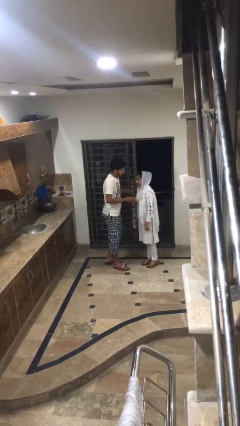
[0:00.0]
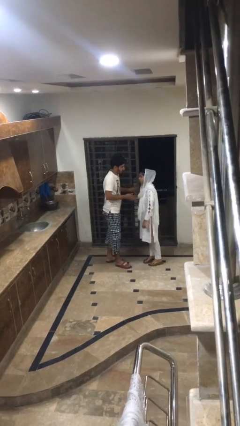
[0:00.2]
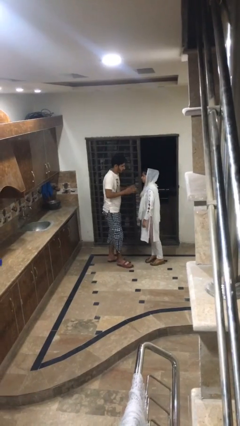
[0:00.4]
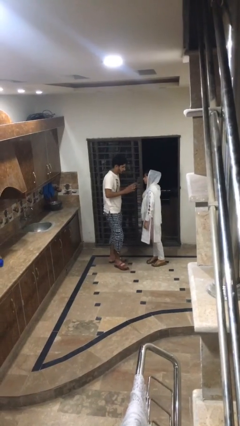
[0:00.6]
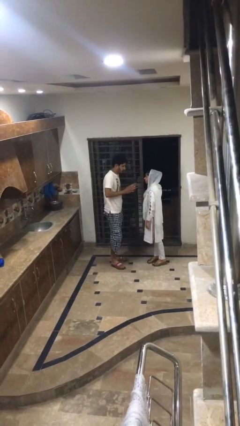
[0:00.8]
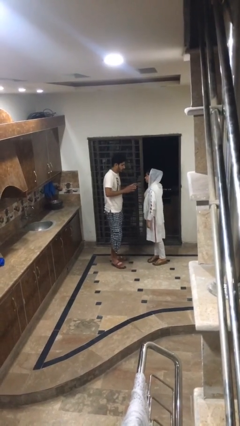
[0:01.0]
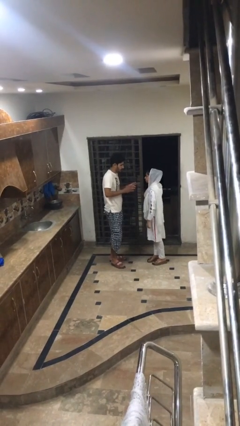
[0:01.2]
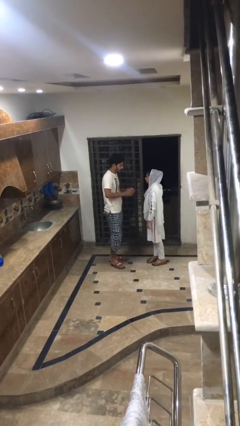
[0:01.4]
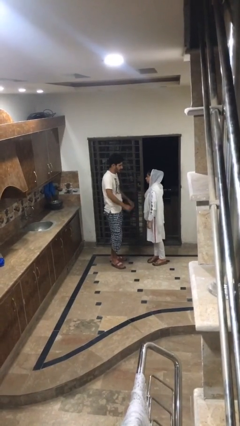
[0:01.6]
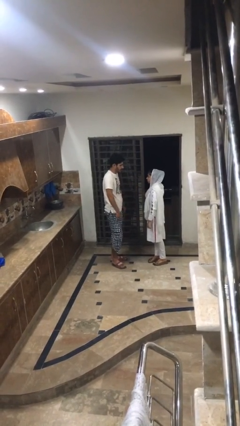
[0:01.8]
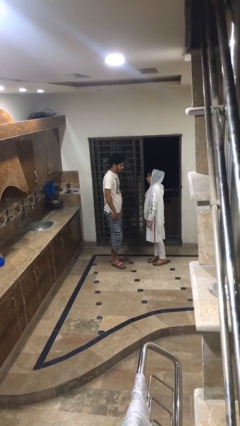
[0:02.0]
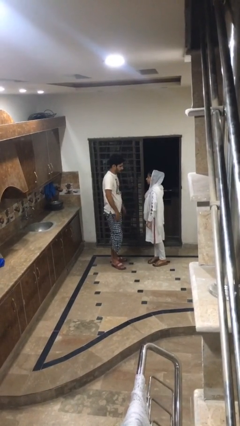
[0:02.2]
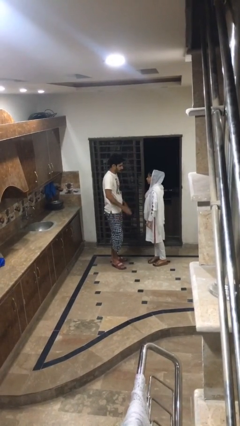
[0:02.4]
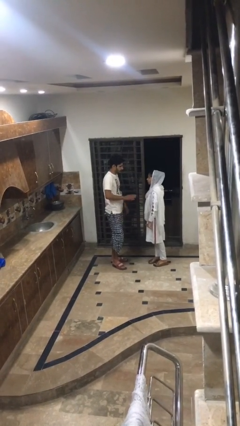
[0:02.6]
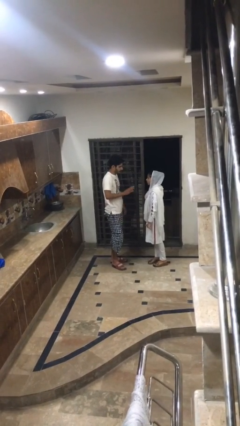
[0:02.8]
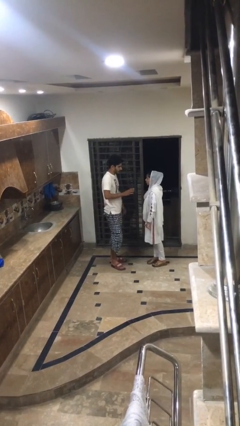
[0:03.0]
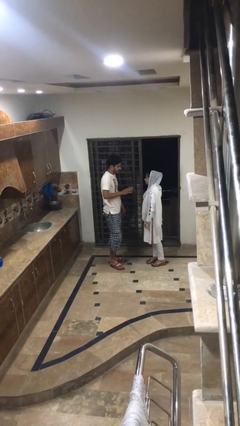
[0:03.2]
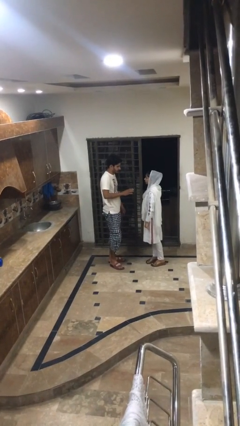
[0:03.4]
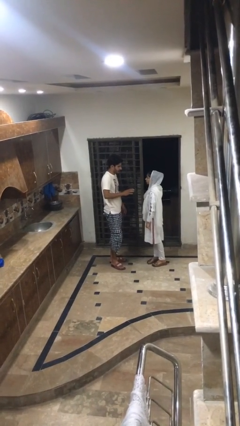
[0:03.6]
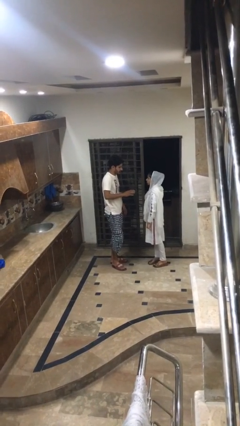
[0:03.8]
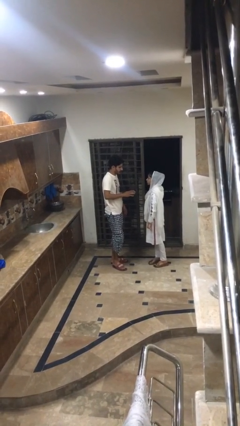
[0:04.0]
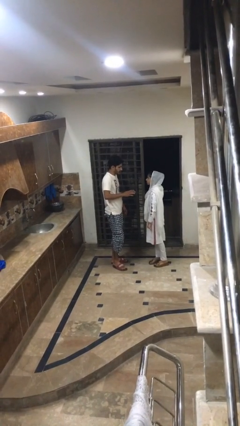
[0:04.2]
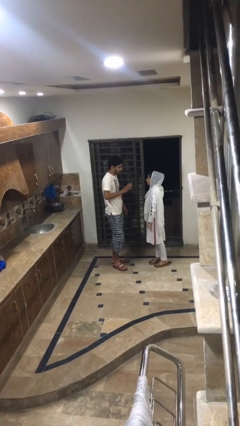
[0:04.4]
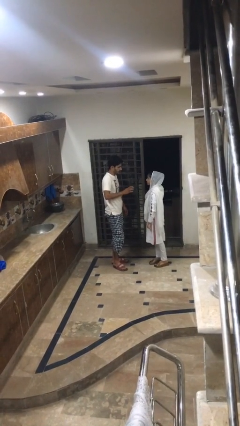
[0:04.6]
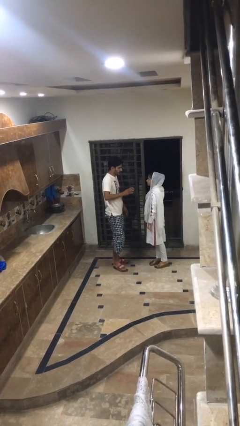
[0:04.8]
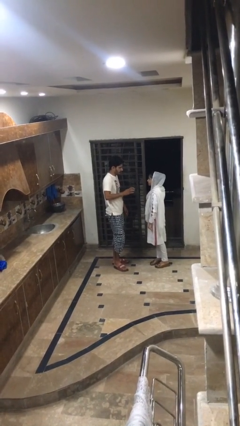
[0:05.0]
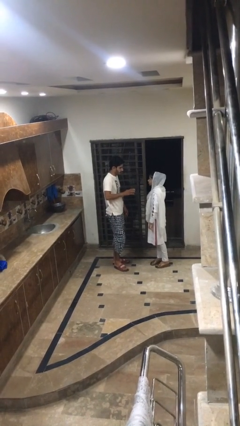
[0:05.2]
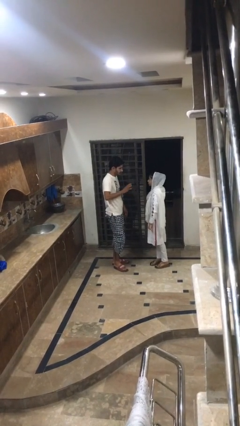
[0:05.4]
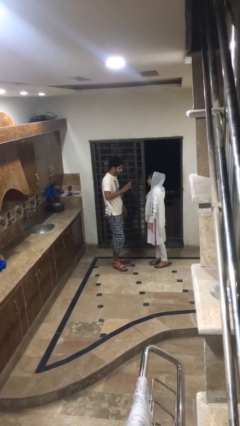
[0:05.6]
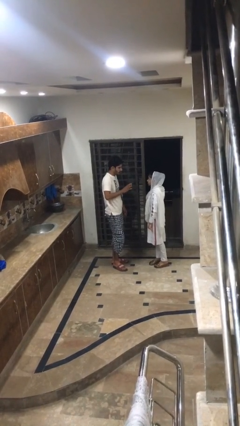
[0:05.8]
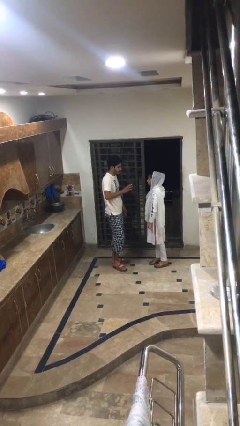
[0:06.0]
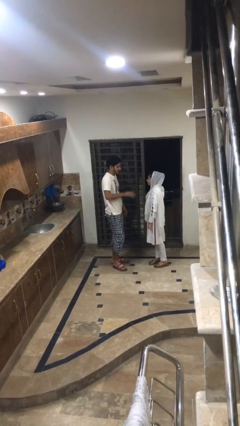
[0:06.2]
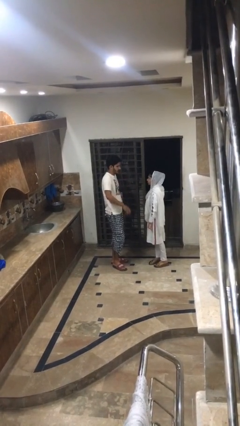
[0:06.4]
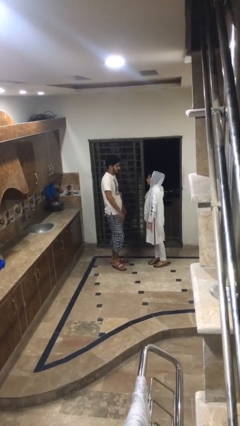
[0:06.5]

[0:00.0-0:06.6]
person talks to person

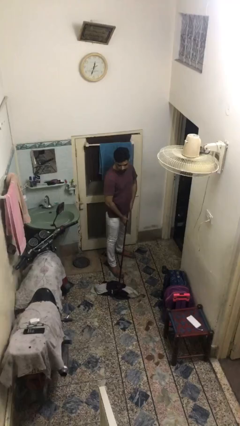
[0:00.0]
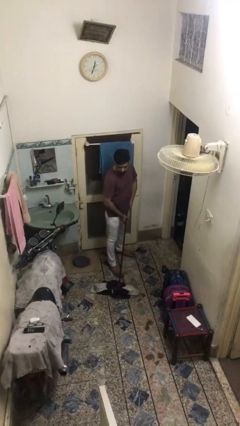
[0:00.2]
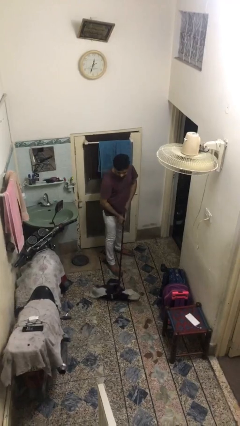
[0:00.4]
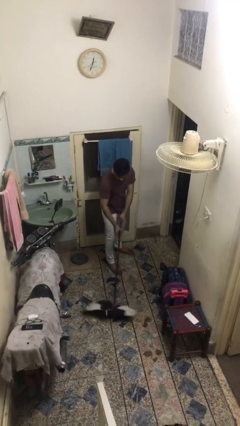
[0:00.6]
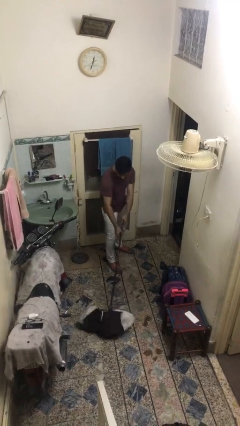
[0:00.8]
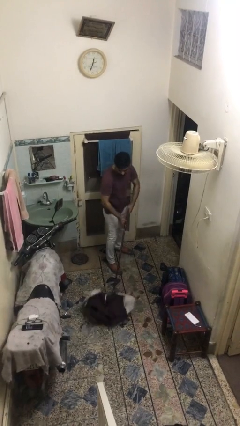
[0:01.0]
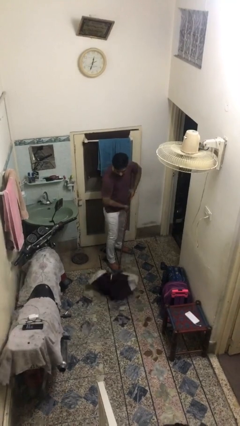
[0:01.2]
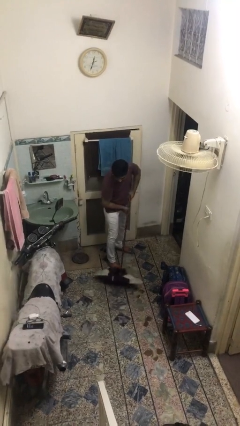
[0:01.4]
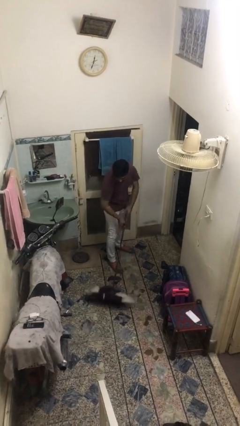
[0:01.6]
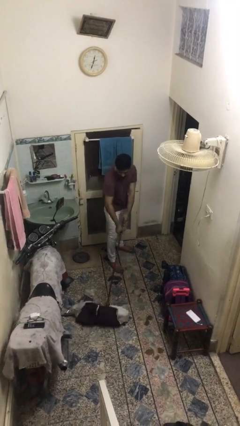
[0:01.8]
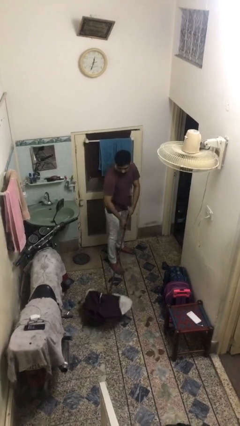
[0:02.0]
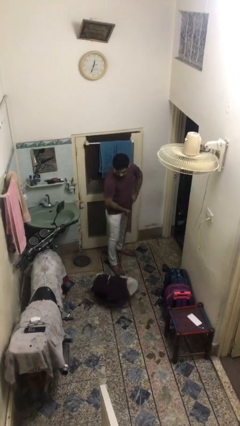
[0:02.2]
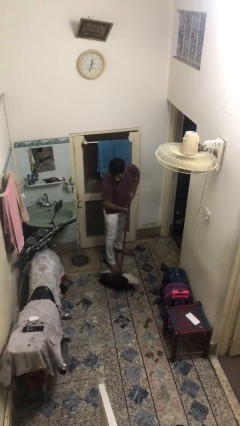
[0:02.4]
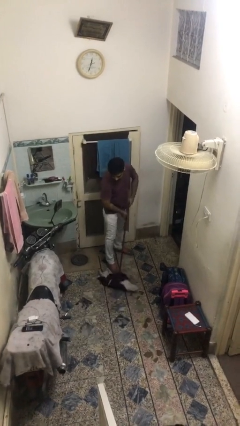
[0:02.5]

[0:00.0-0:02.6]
person sweeps floor

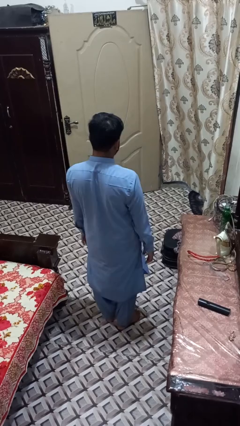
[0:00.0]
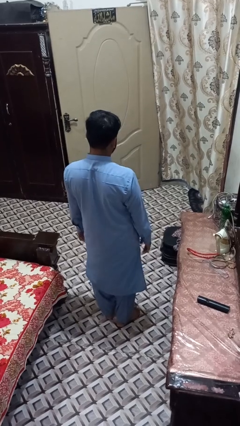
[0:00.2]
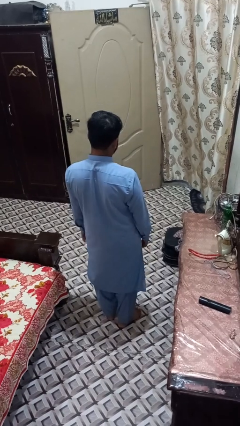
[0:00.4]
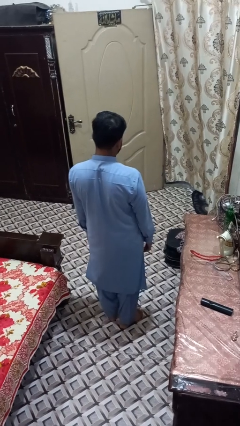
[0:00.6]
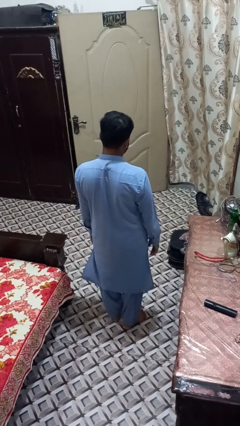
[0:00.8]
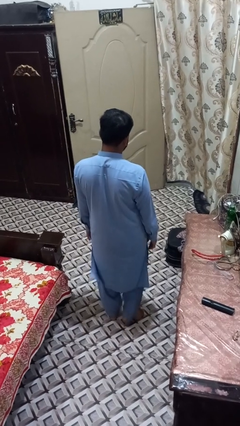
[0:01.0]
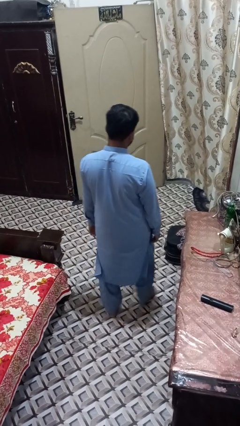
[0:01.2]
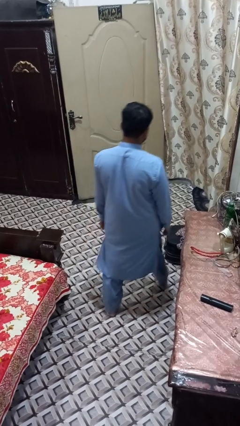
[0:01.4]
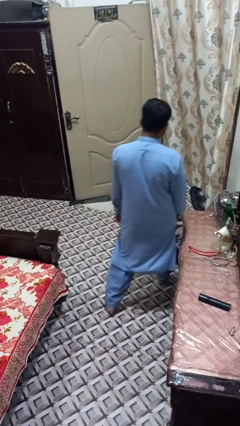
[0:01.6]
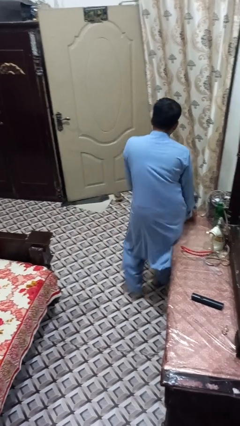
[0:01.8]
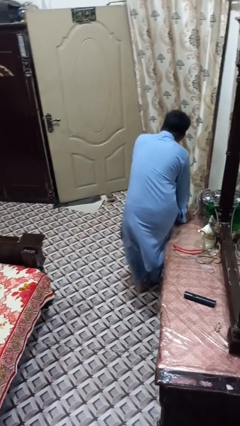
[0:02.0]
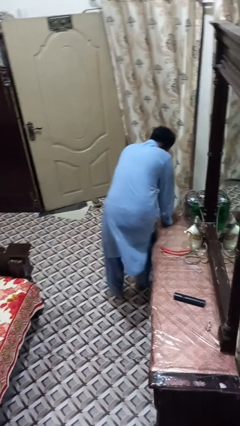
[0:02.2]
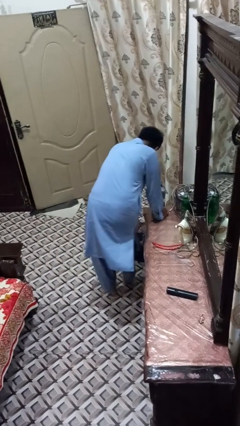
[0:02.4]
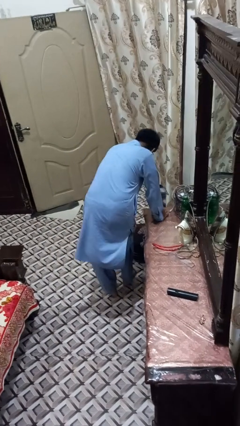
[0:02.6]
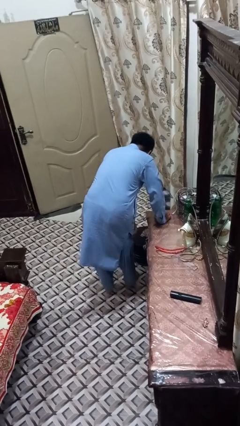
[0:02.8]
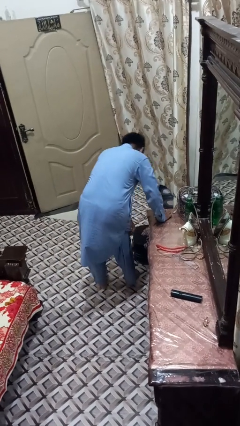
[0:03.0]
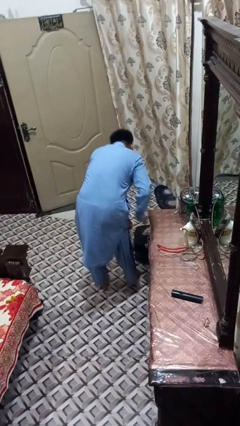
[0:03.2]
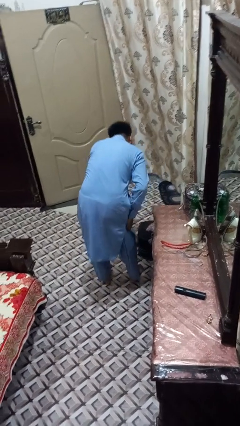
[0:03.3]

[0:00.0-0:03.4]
person bumps into table

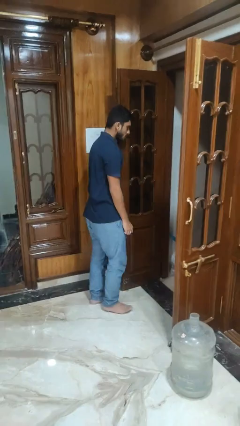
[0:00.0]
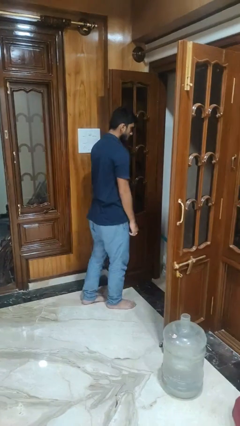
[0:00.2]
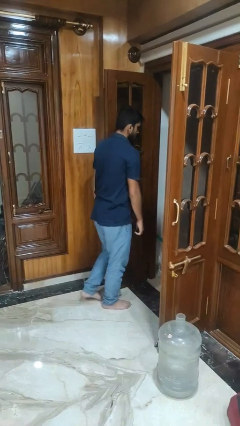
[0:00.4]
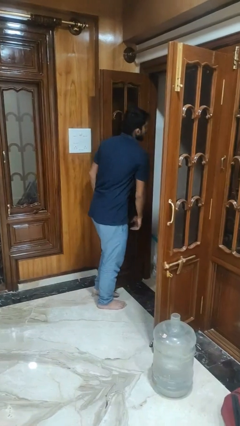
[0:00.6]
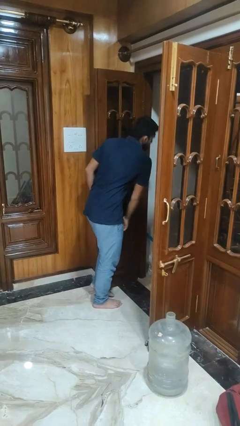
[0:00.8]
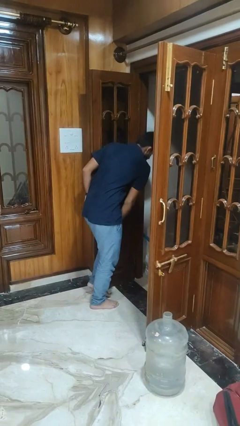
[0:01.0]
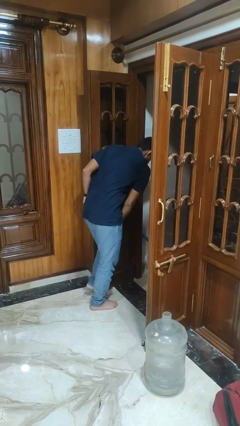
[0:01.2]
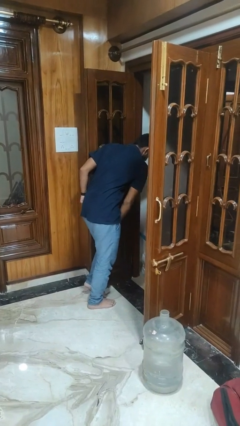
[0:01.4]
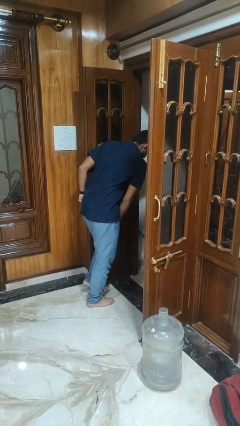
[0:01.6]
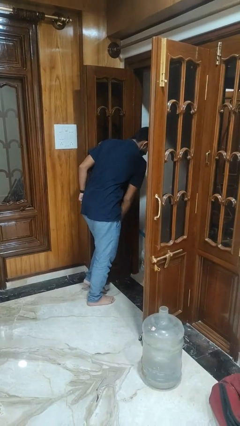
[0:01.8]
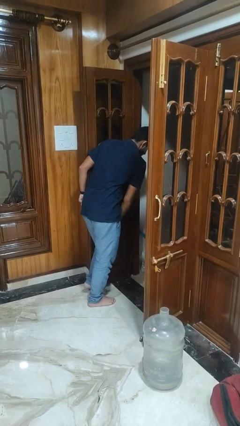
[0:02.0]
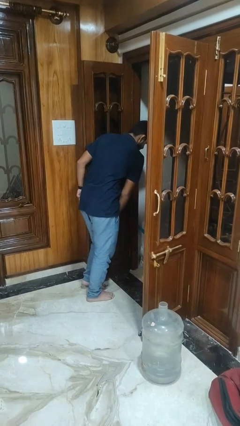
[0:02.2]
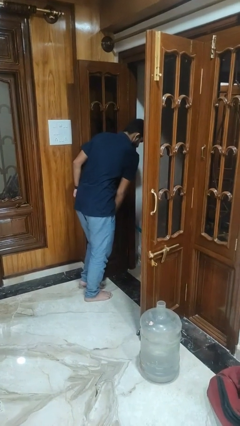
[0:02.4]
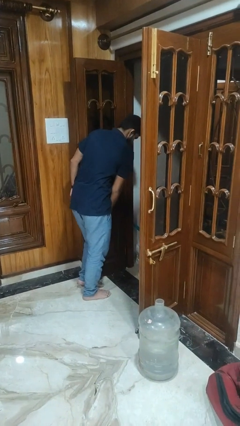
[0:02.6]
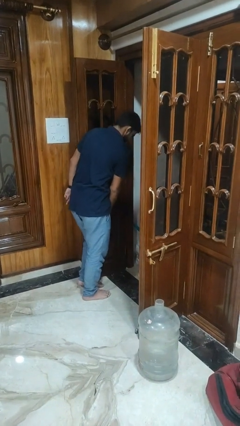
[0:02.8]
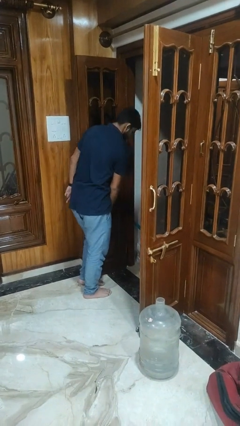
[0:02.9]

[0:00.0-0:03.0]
person bumps into wall

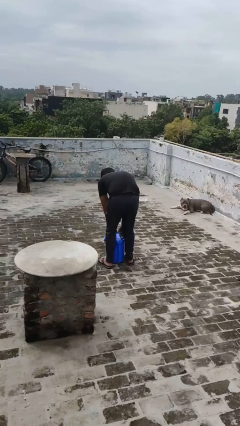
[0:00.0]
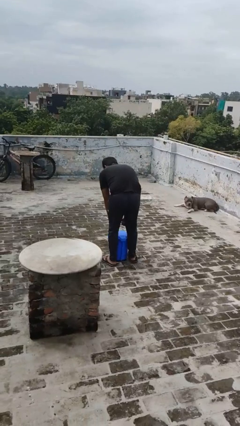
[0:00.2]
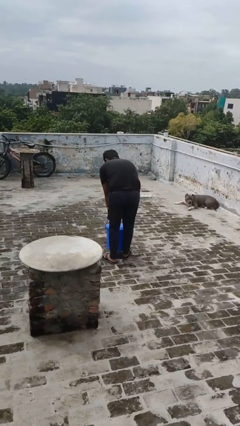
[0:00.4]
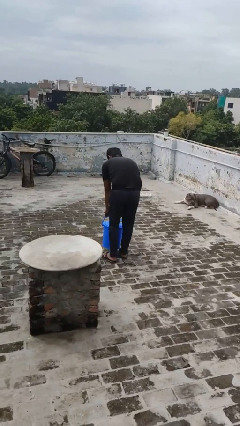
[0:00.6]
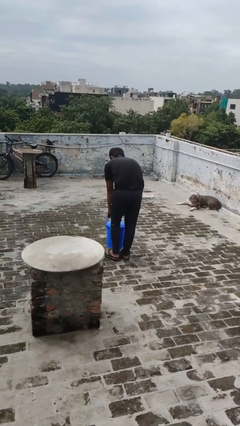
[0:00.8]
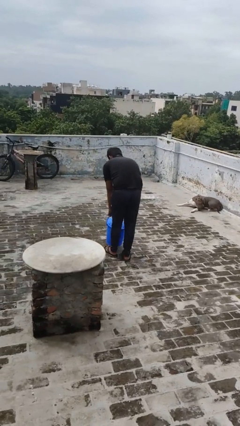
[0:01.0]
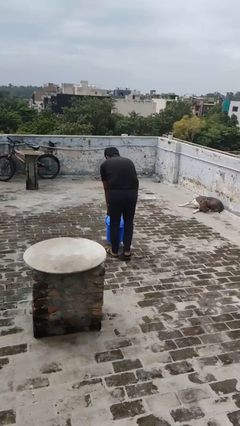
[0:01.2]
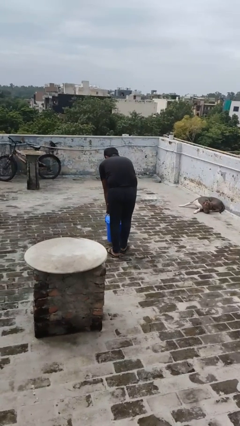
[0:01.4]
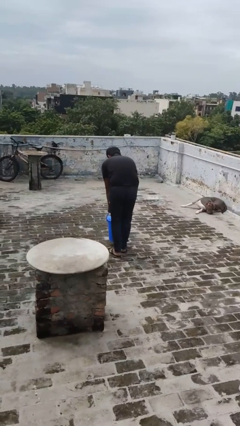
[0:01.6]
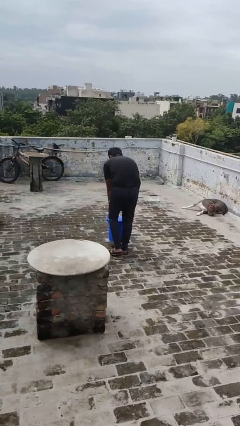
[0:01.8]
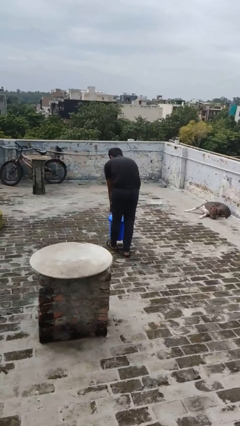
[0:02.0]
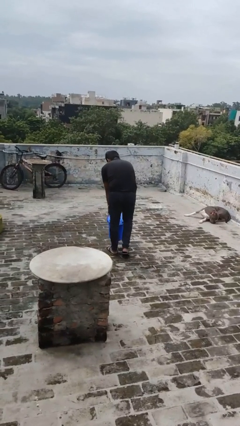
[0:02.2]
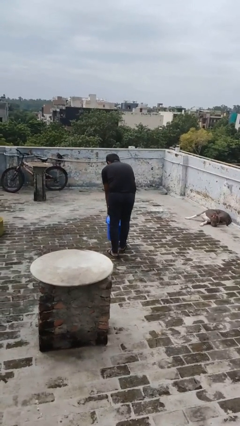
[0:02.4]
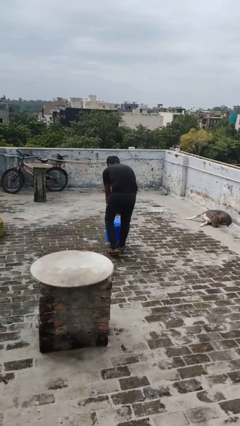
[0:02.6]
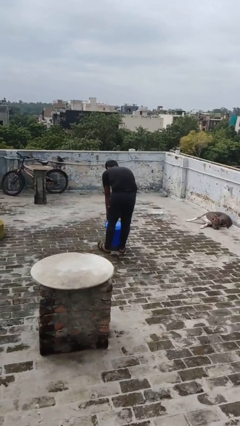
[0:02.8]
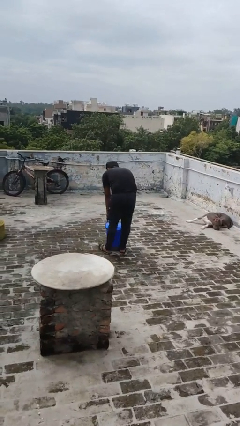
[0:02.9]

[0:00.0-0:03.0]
person pushes wheeled trashcan
